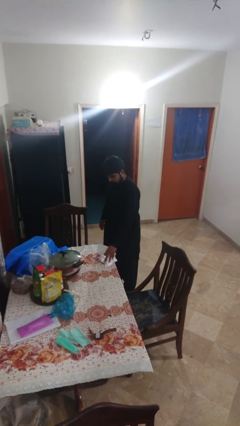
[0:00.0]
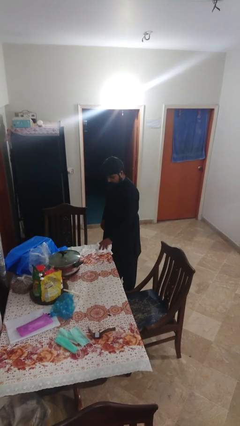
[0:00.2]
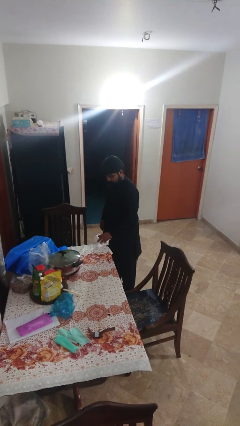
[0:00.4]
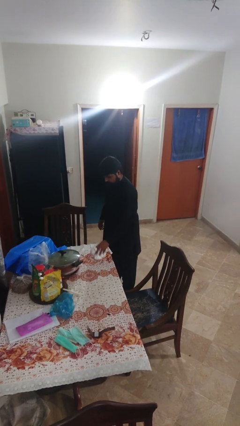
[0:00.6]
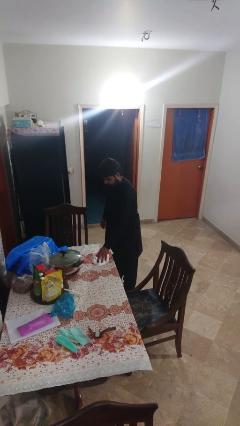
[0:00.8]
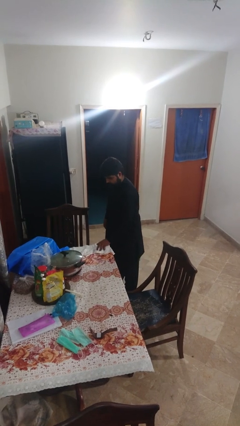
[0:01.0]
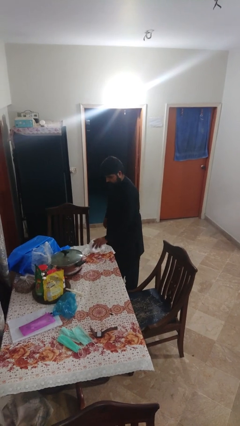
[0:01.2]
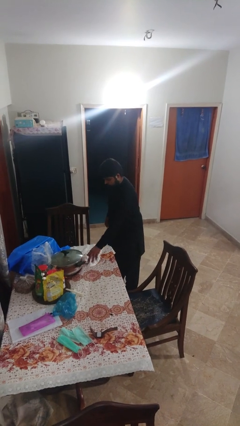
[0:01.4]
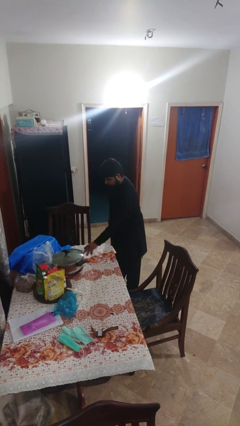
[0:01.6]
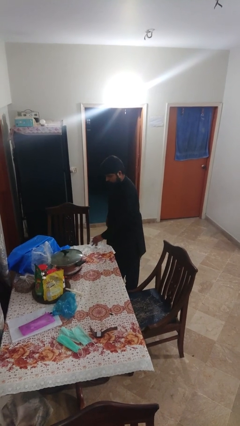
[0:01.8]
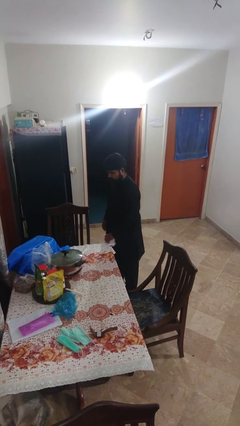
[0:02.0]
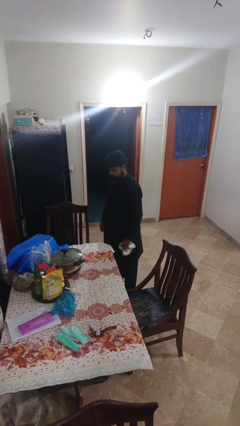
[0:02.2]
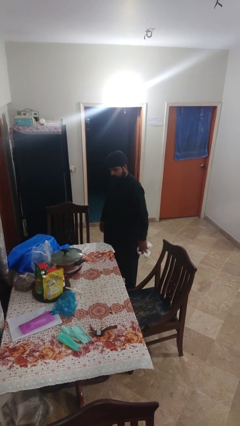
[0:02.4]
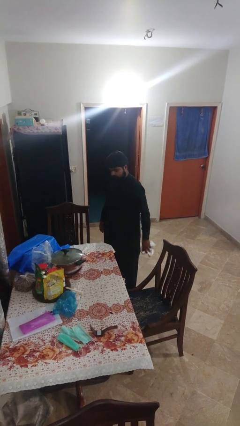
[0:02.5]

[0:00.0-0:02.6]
person cleans table with rag

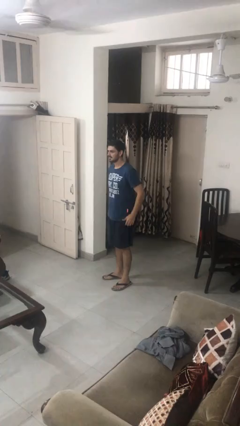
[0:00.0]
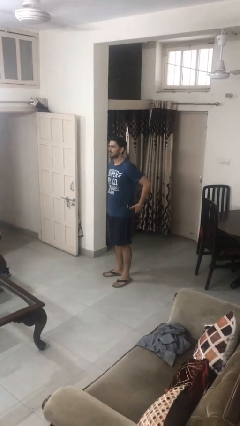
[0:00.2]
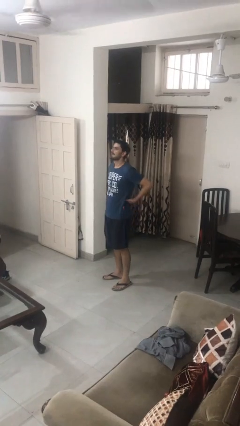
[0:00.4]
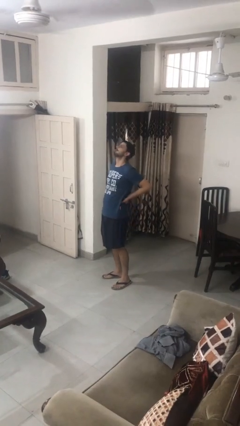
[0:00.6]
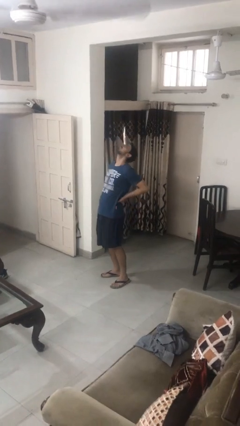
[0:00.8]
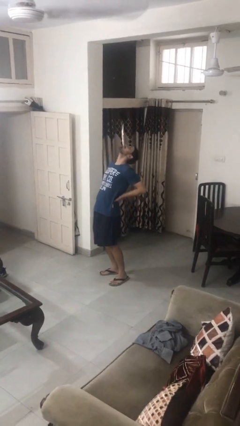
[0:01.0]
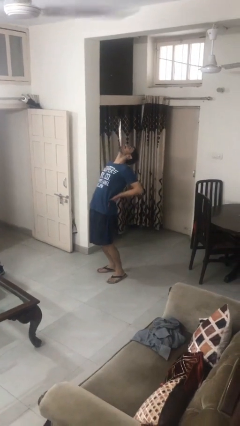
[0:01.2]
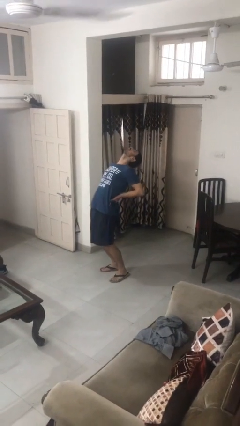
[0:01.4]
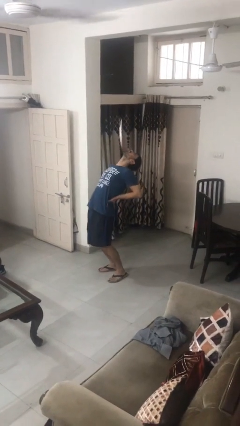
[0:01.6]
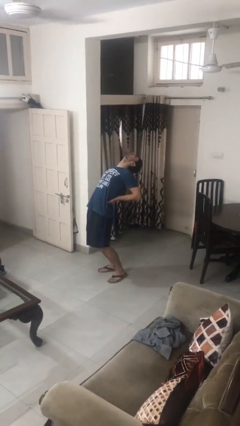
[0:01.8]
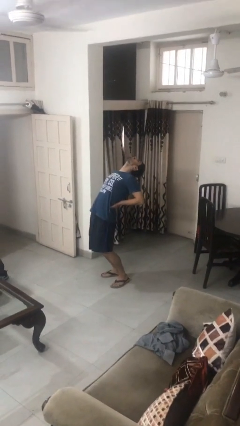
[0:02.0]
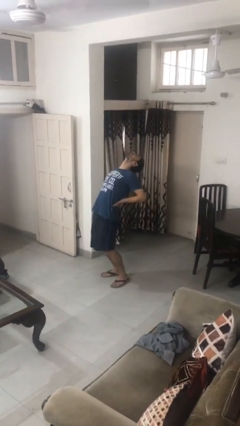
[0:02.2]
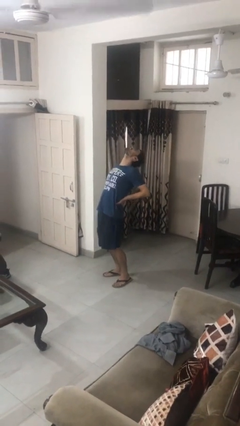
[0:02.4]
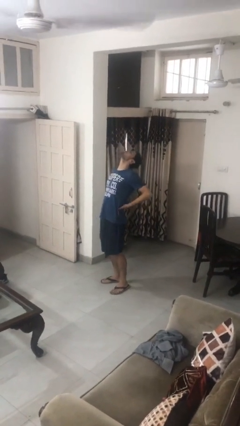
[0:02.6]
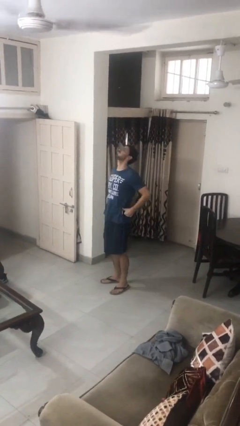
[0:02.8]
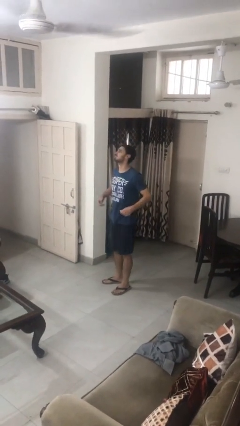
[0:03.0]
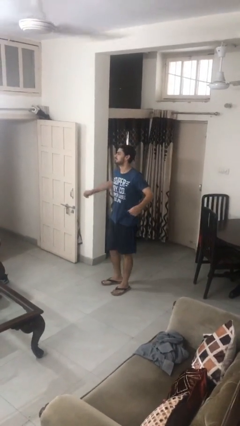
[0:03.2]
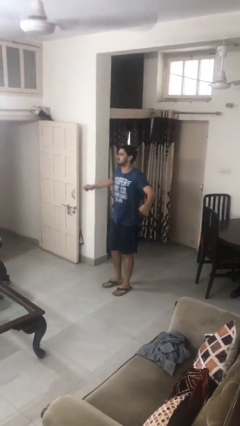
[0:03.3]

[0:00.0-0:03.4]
person stretches back

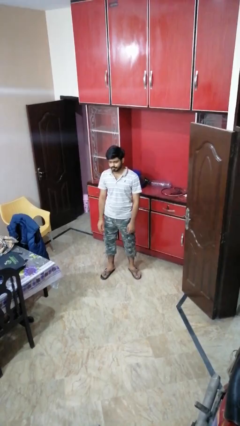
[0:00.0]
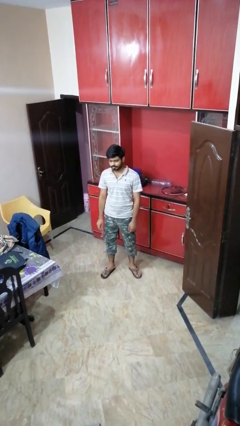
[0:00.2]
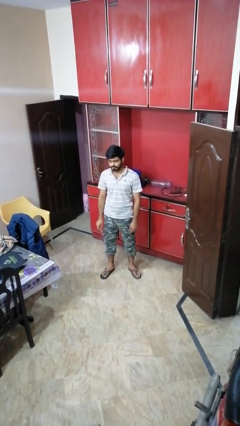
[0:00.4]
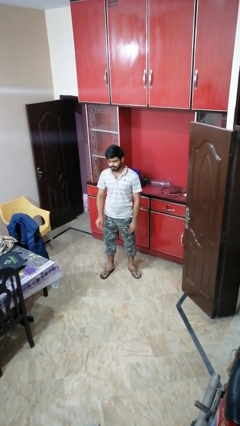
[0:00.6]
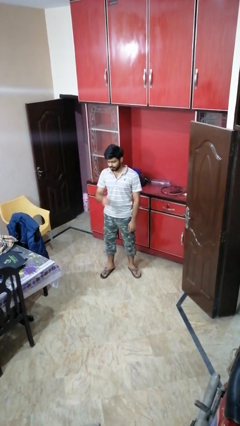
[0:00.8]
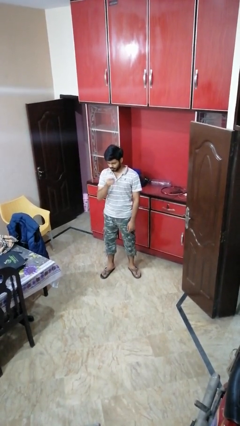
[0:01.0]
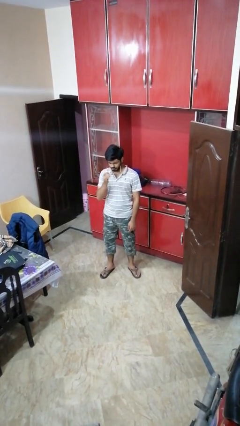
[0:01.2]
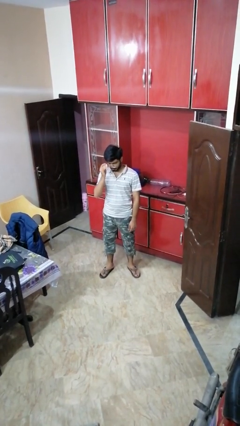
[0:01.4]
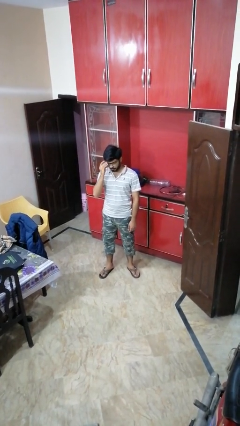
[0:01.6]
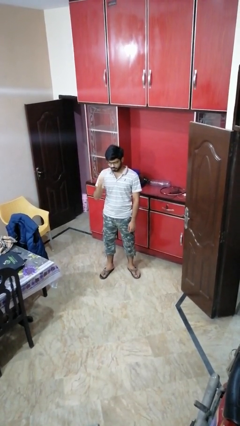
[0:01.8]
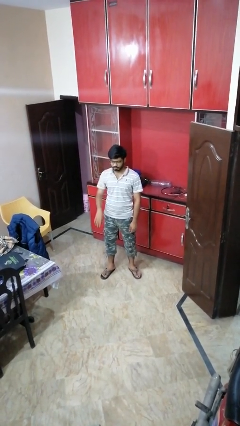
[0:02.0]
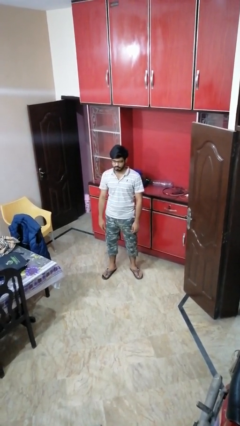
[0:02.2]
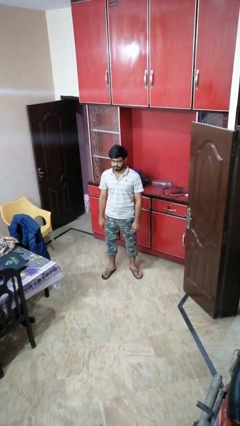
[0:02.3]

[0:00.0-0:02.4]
person puts on glasses

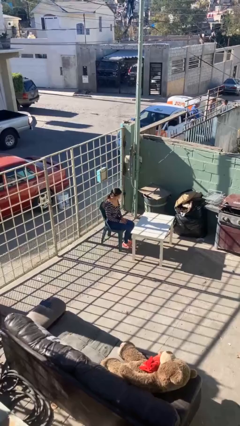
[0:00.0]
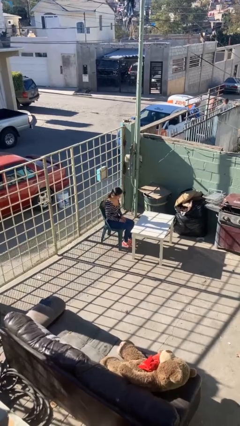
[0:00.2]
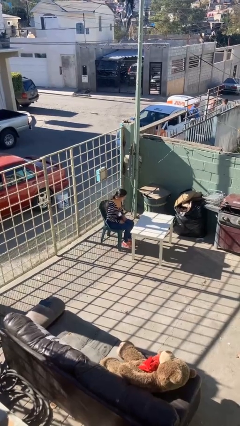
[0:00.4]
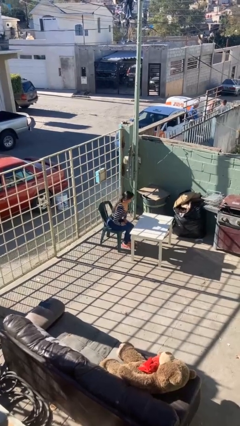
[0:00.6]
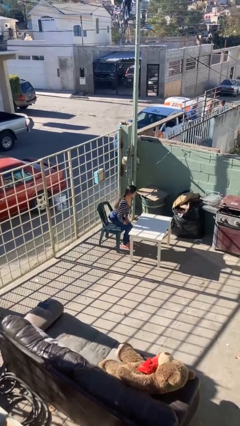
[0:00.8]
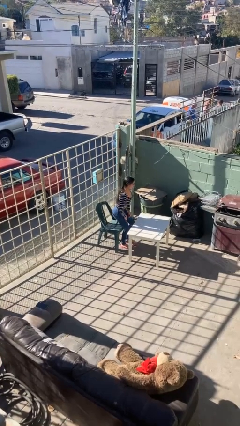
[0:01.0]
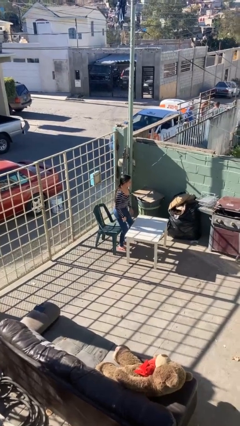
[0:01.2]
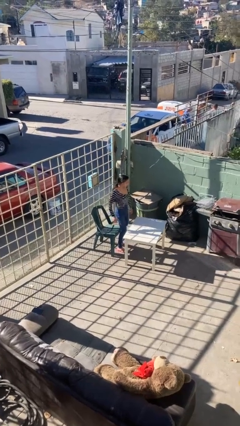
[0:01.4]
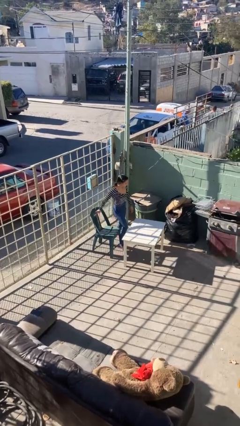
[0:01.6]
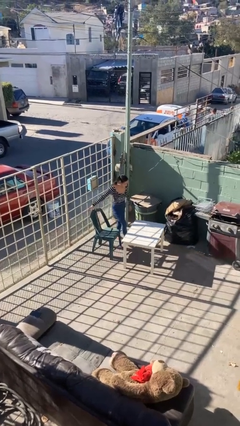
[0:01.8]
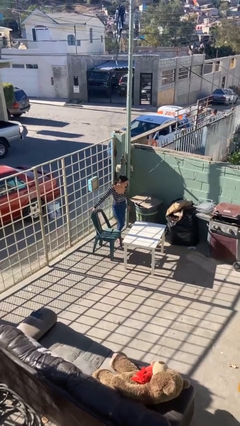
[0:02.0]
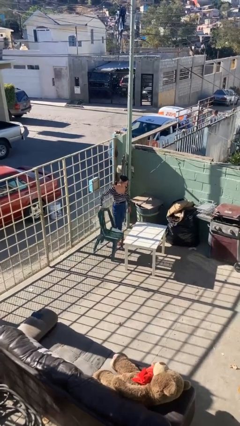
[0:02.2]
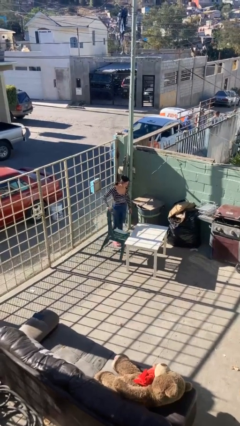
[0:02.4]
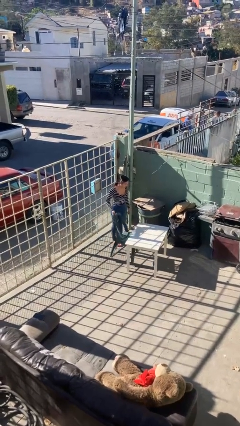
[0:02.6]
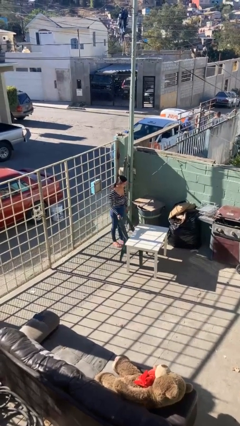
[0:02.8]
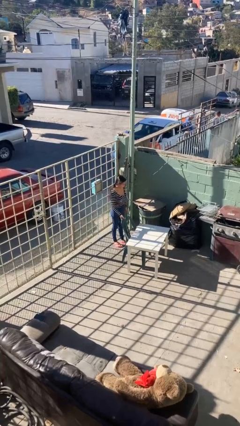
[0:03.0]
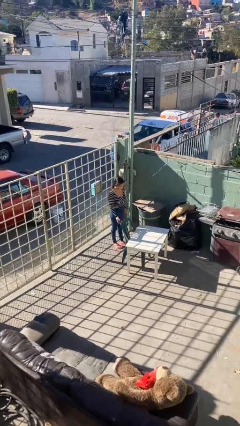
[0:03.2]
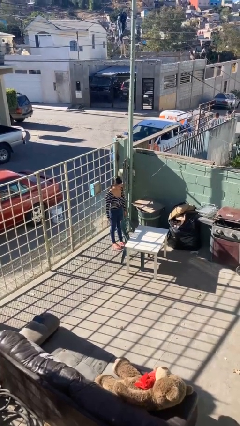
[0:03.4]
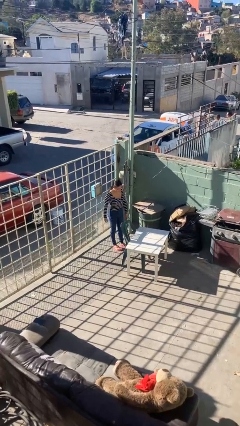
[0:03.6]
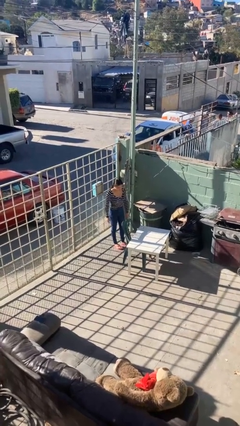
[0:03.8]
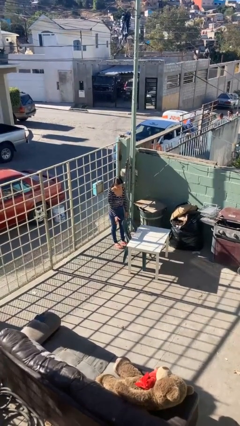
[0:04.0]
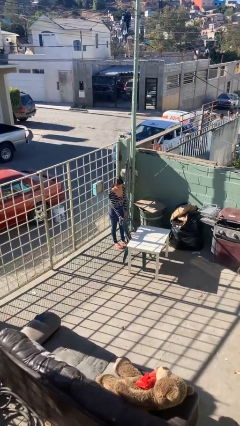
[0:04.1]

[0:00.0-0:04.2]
person stands up

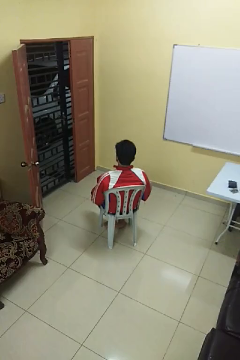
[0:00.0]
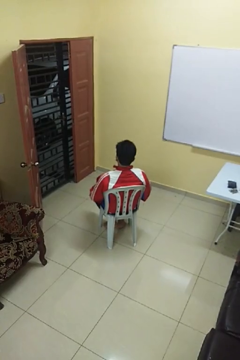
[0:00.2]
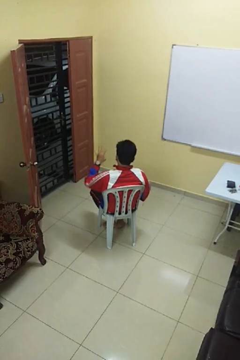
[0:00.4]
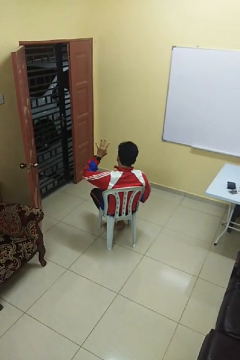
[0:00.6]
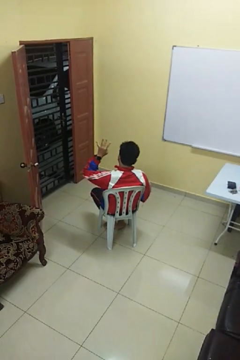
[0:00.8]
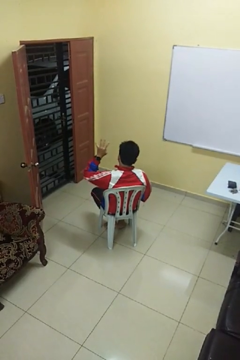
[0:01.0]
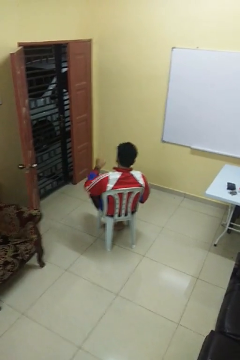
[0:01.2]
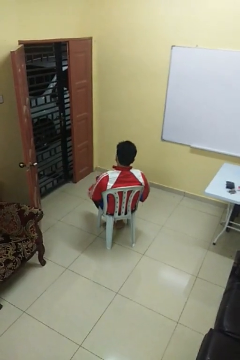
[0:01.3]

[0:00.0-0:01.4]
person gestures number four

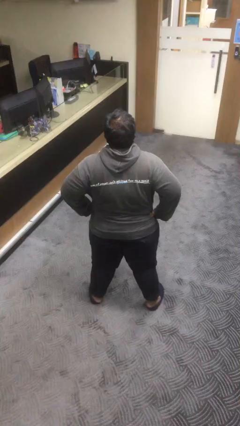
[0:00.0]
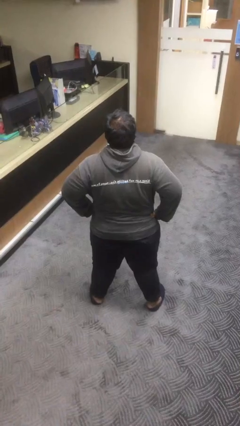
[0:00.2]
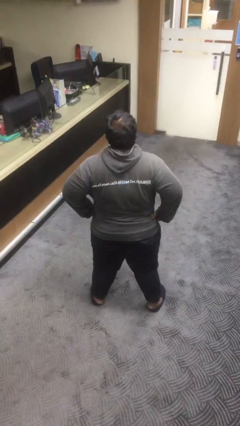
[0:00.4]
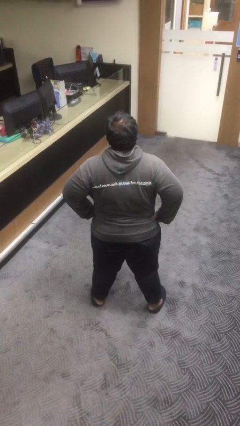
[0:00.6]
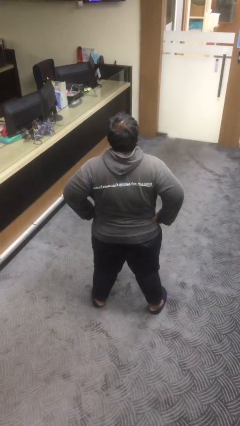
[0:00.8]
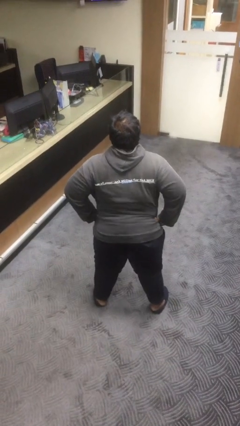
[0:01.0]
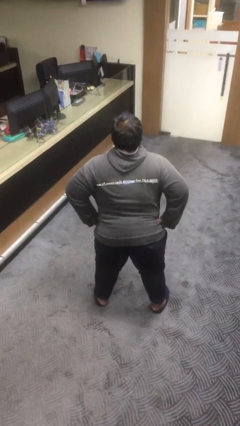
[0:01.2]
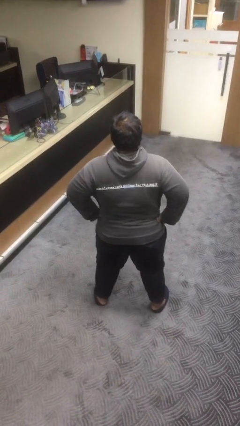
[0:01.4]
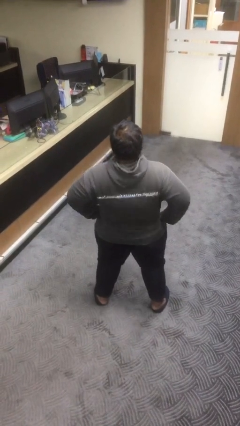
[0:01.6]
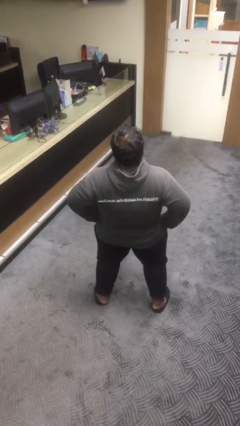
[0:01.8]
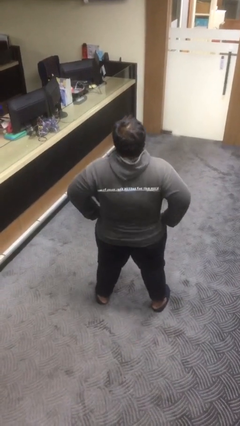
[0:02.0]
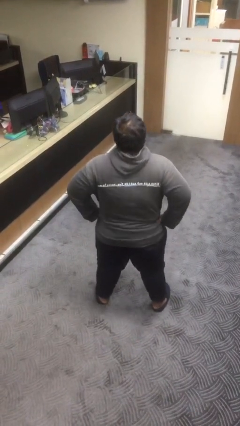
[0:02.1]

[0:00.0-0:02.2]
person wiggles hips

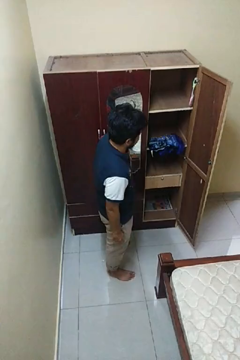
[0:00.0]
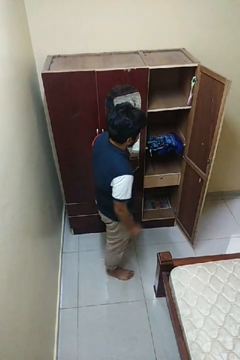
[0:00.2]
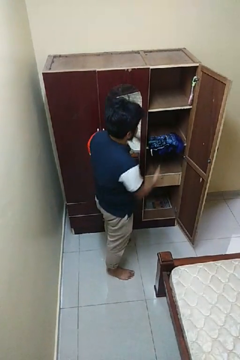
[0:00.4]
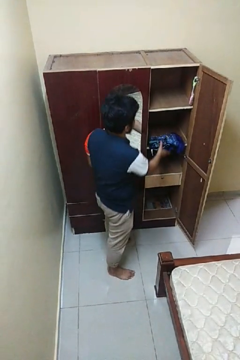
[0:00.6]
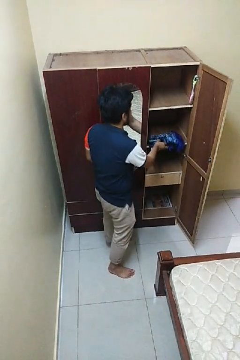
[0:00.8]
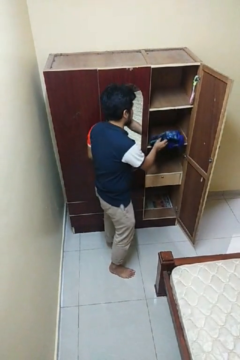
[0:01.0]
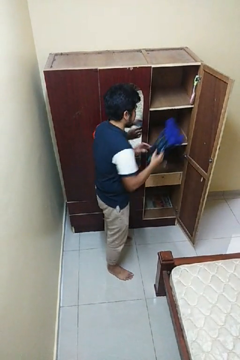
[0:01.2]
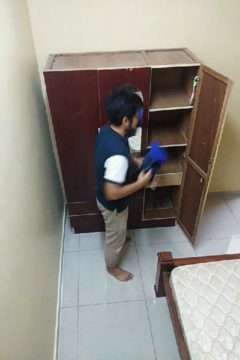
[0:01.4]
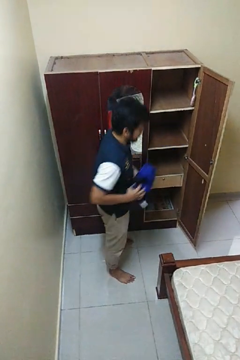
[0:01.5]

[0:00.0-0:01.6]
person picks up object from cabinet
